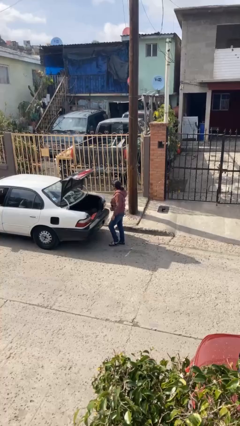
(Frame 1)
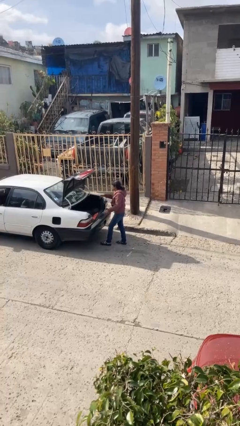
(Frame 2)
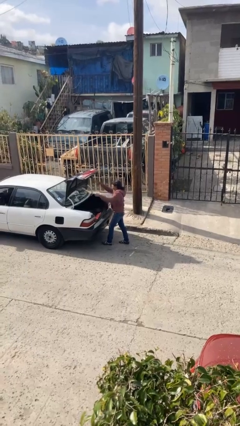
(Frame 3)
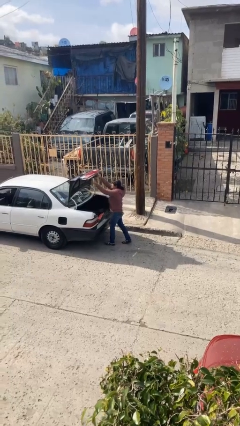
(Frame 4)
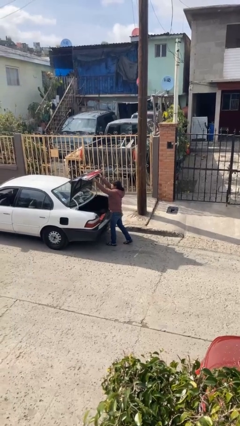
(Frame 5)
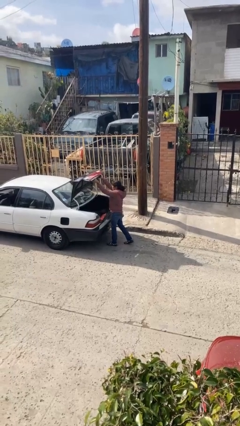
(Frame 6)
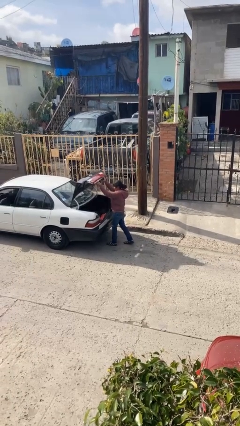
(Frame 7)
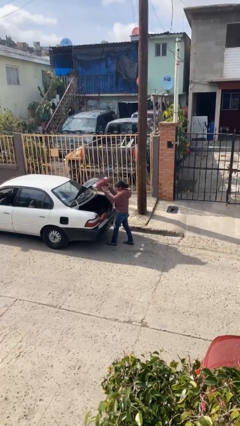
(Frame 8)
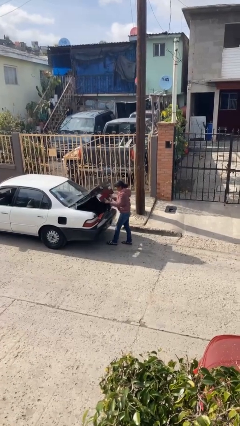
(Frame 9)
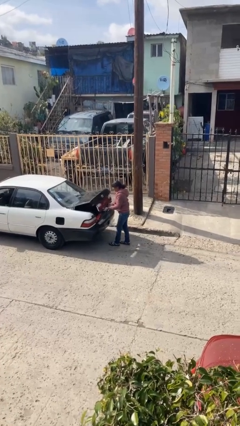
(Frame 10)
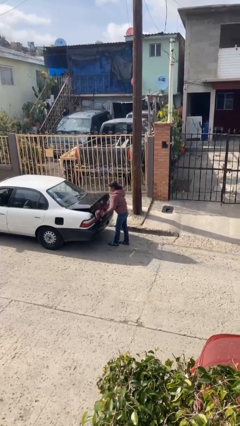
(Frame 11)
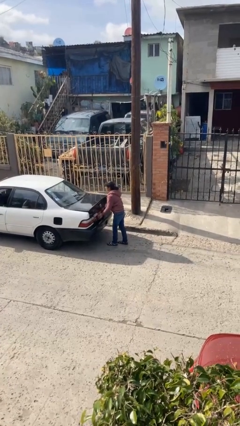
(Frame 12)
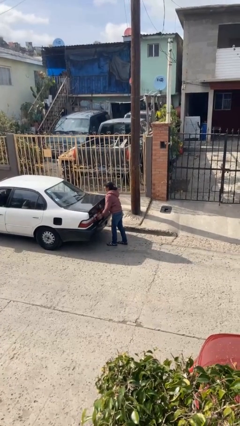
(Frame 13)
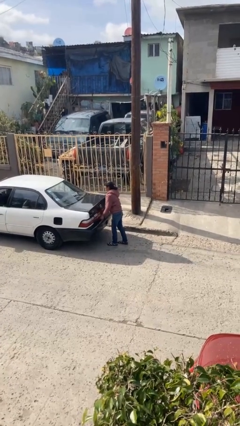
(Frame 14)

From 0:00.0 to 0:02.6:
person closes car trunk

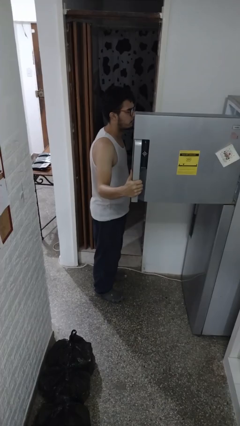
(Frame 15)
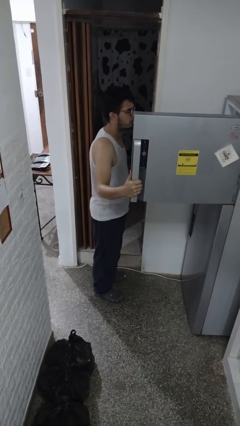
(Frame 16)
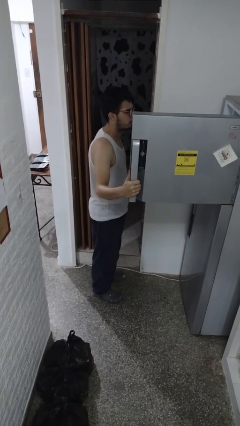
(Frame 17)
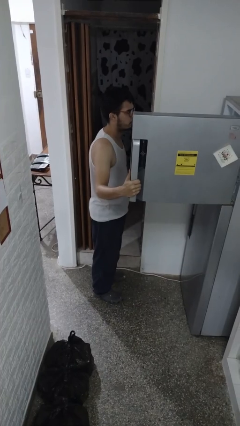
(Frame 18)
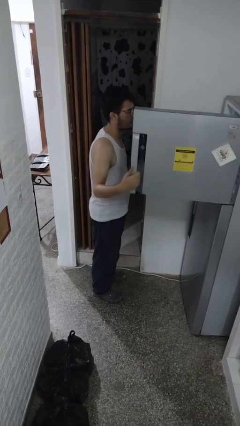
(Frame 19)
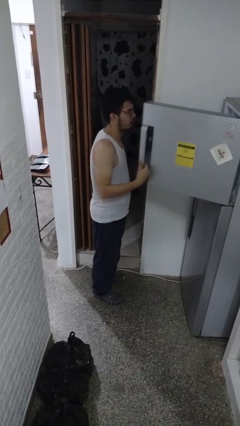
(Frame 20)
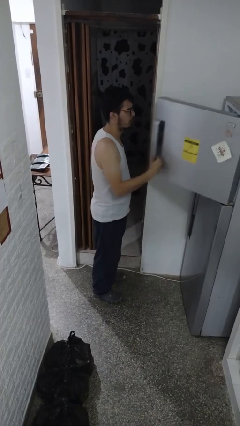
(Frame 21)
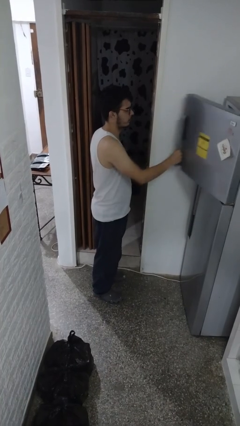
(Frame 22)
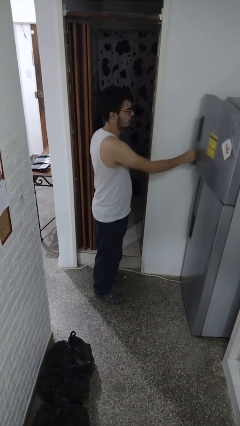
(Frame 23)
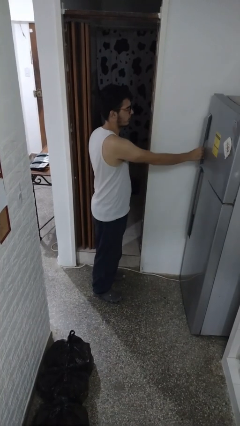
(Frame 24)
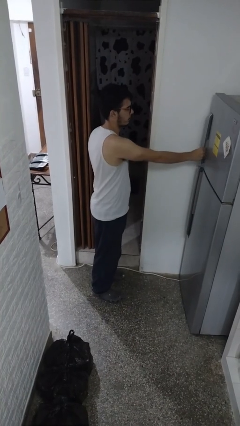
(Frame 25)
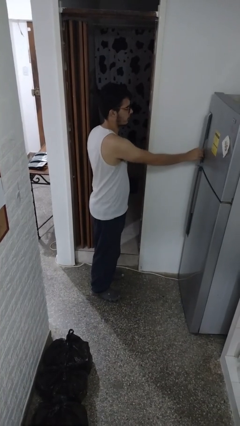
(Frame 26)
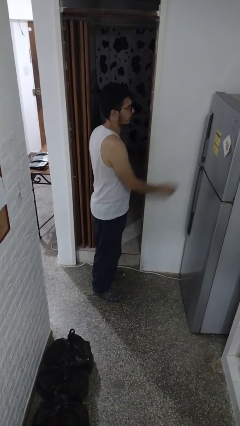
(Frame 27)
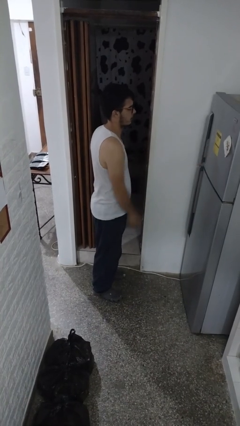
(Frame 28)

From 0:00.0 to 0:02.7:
person closes refrigerator

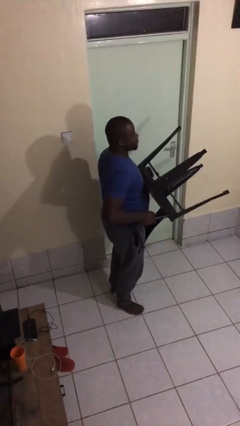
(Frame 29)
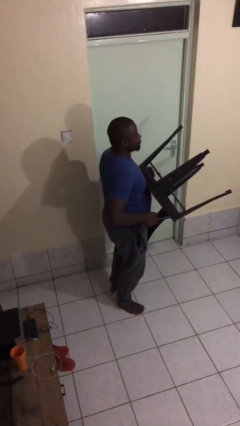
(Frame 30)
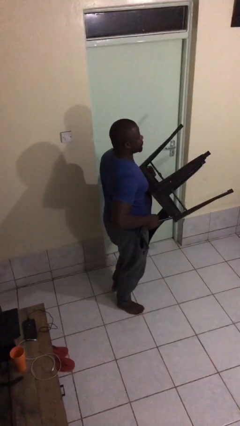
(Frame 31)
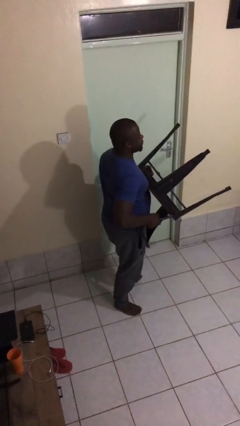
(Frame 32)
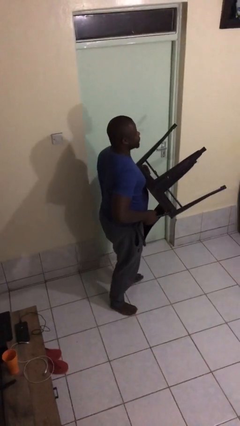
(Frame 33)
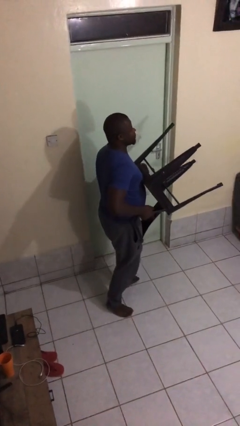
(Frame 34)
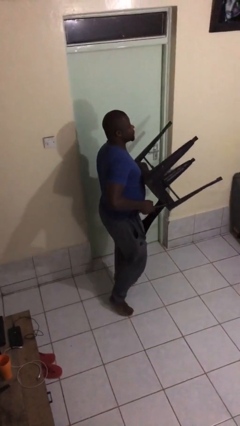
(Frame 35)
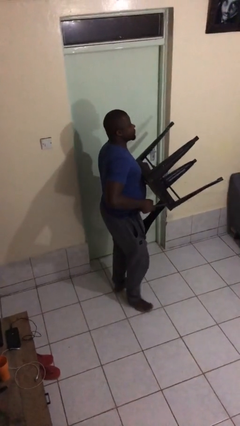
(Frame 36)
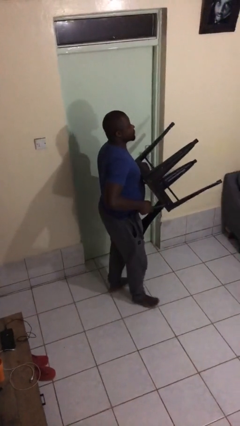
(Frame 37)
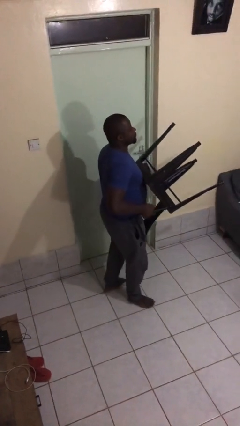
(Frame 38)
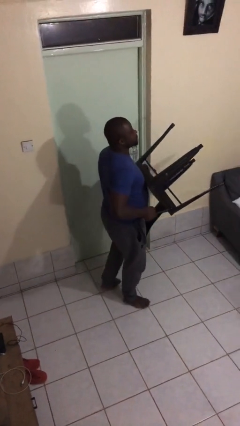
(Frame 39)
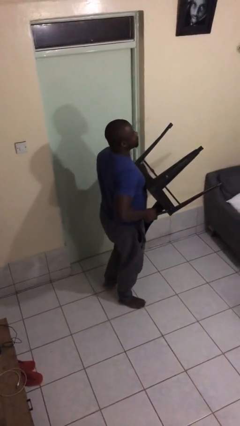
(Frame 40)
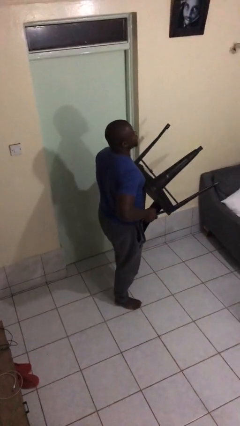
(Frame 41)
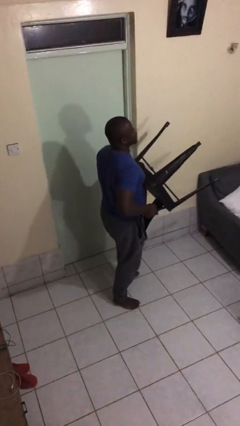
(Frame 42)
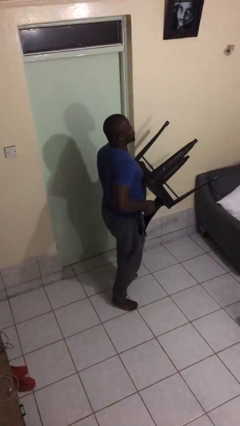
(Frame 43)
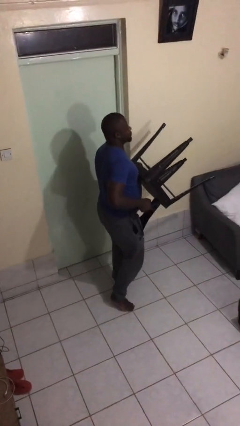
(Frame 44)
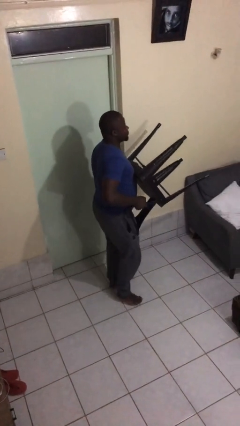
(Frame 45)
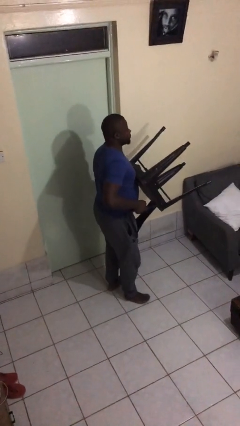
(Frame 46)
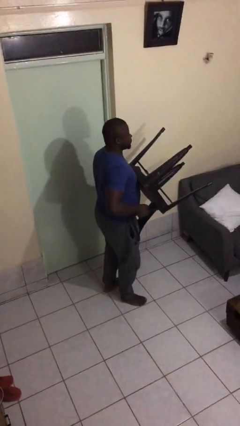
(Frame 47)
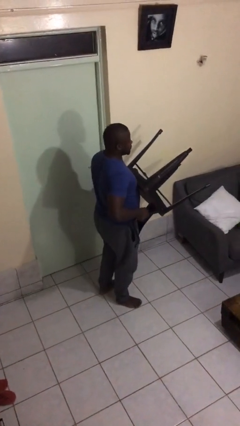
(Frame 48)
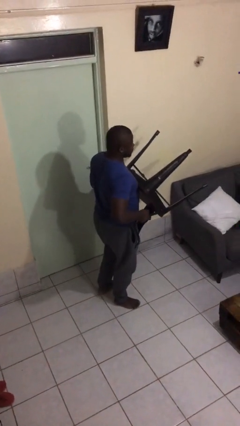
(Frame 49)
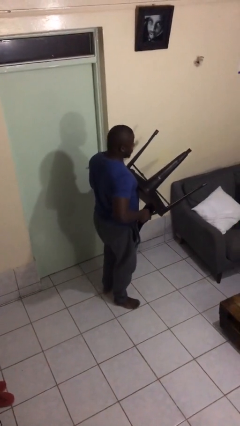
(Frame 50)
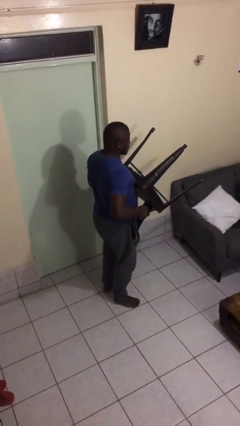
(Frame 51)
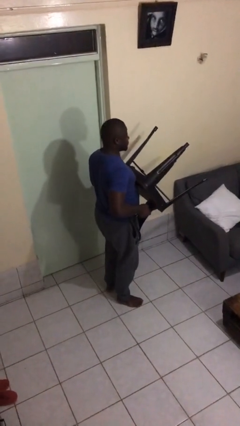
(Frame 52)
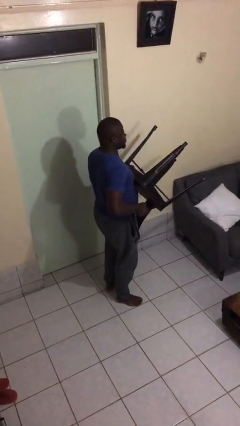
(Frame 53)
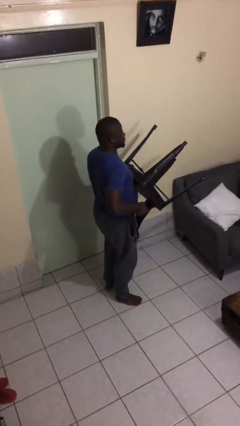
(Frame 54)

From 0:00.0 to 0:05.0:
person carries furniture

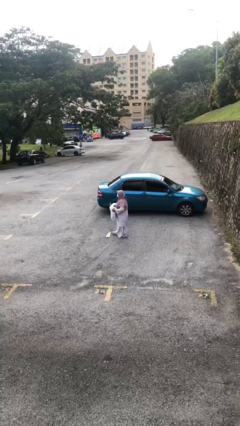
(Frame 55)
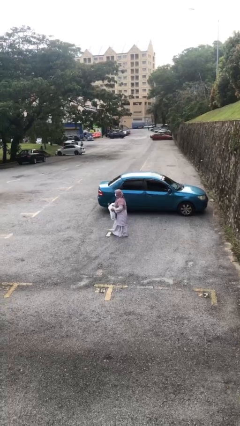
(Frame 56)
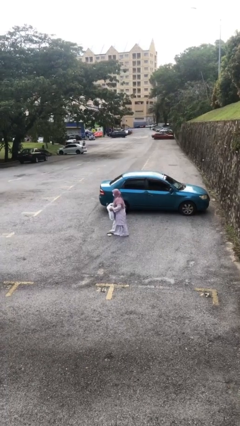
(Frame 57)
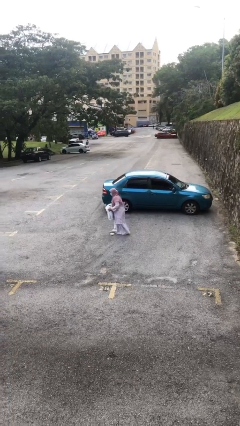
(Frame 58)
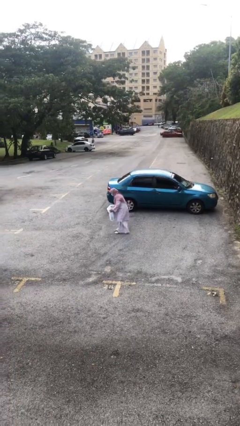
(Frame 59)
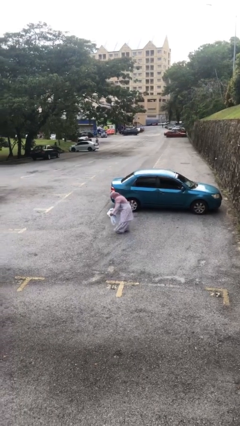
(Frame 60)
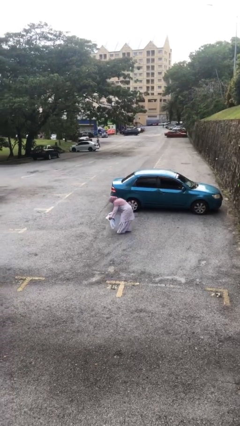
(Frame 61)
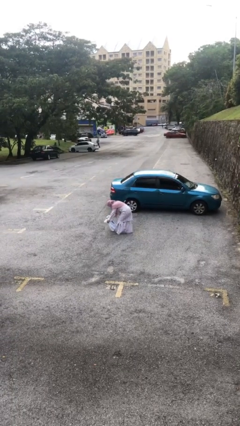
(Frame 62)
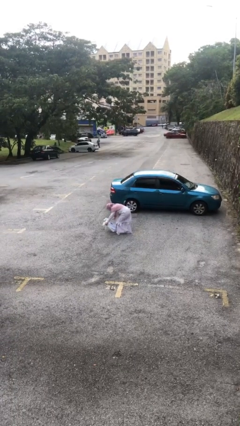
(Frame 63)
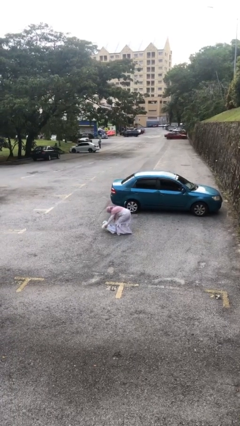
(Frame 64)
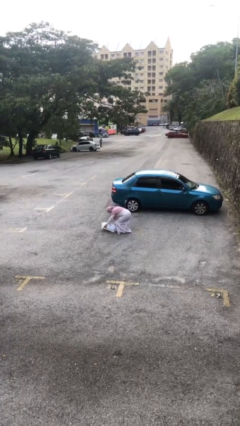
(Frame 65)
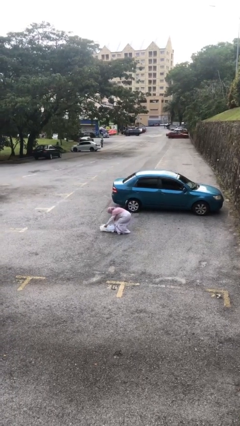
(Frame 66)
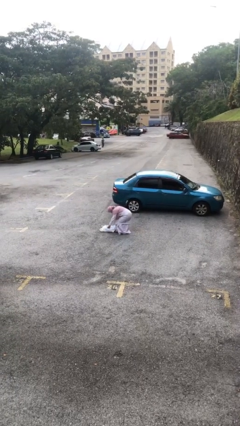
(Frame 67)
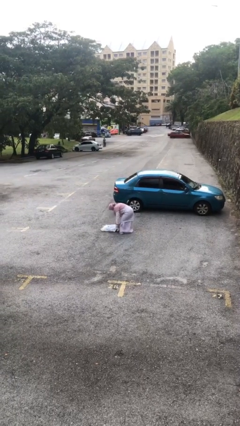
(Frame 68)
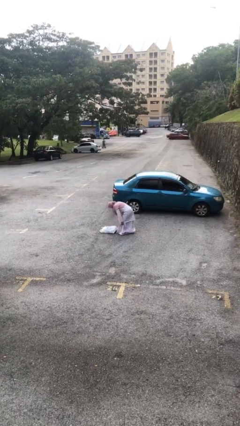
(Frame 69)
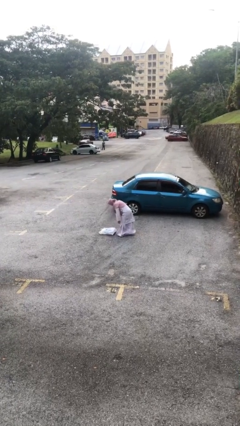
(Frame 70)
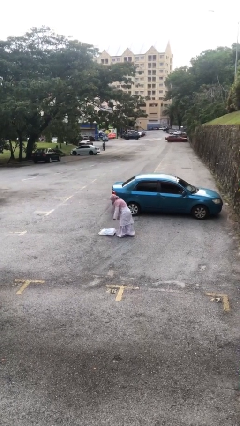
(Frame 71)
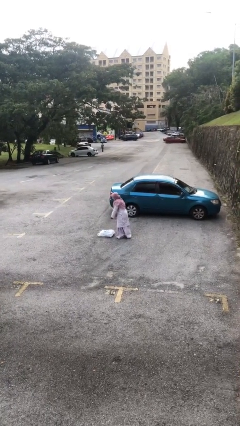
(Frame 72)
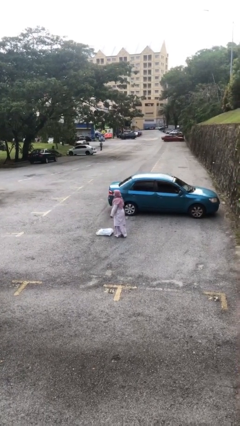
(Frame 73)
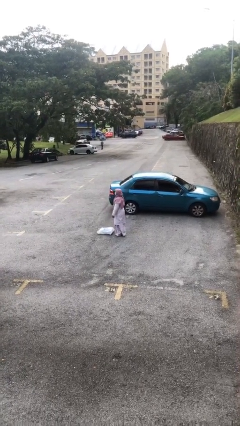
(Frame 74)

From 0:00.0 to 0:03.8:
person puts down object on floor

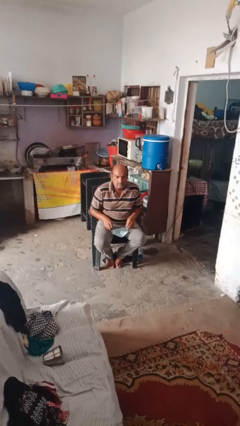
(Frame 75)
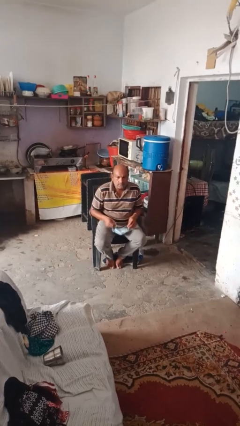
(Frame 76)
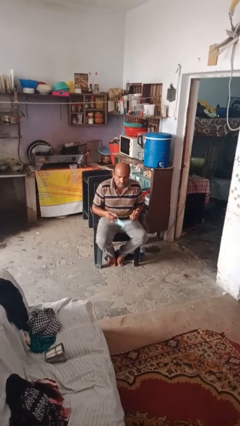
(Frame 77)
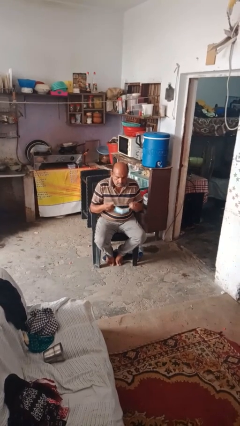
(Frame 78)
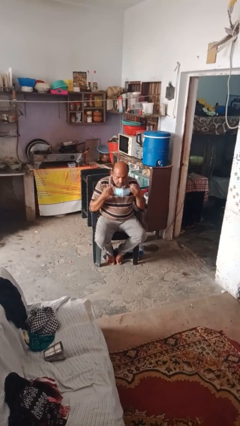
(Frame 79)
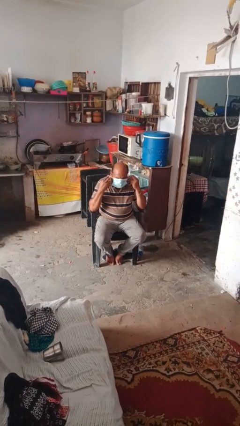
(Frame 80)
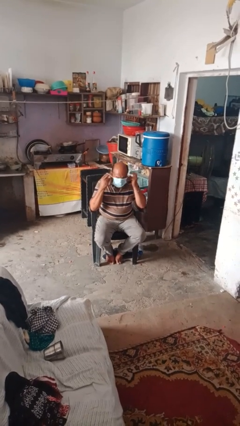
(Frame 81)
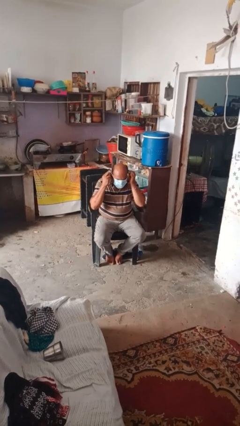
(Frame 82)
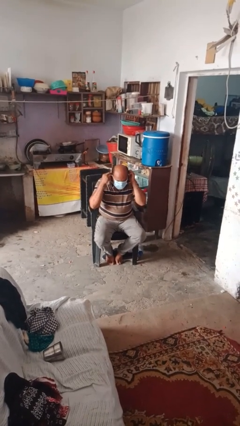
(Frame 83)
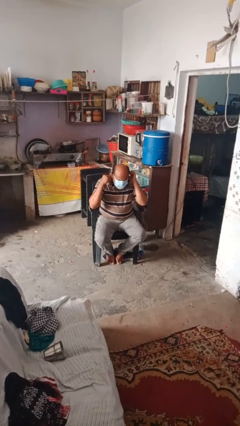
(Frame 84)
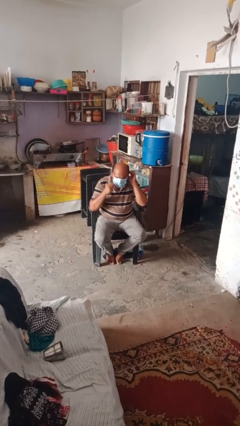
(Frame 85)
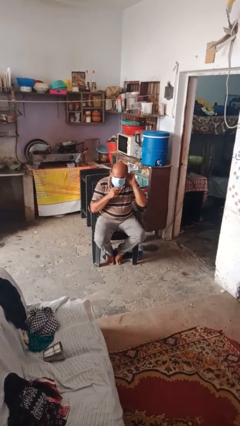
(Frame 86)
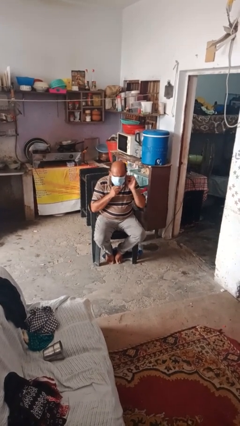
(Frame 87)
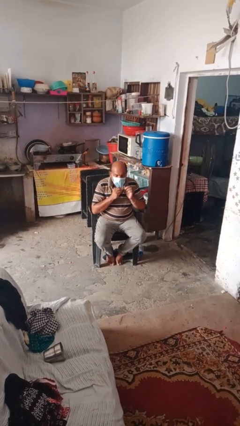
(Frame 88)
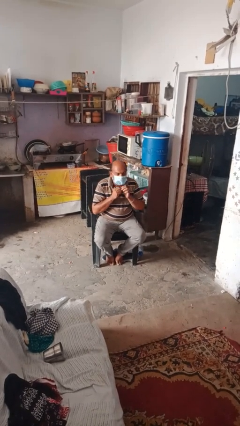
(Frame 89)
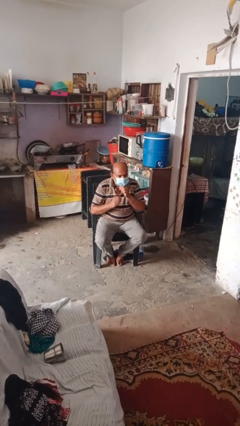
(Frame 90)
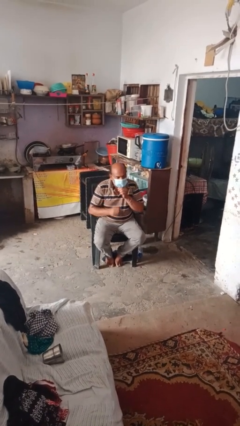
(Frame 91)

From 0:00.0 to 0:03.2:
person puts on facemask
